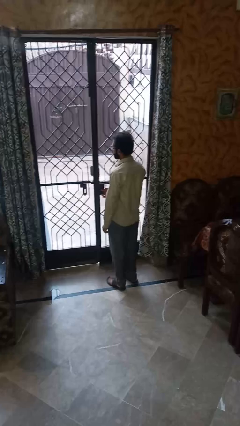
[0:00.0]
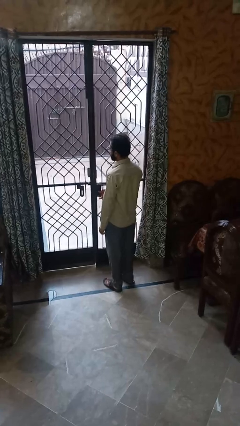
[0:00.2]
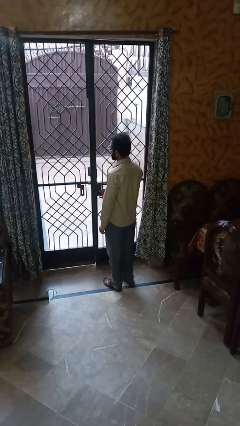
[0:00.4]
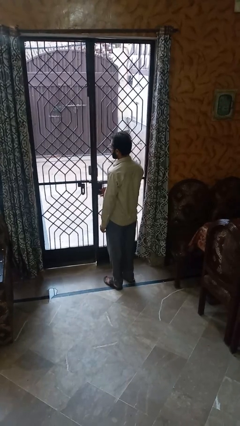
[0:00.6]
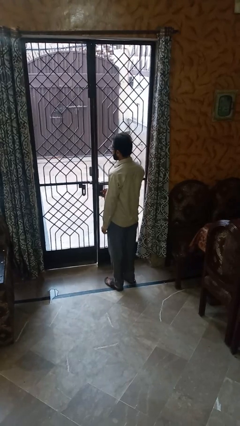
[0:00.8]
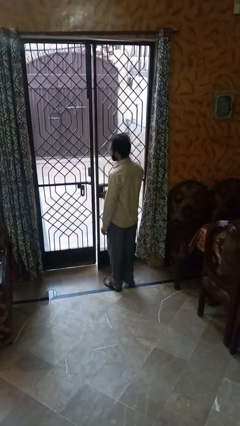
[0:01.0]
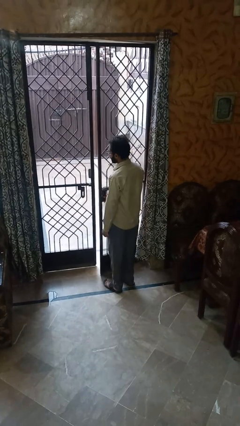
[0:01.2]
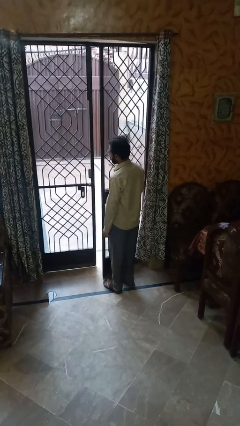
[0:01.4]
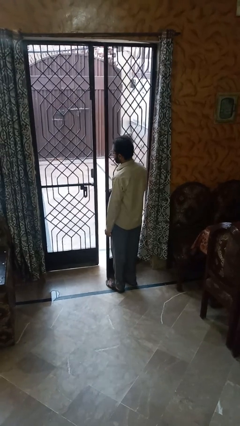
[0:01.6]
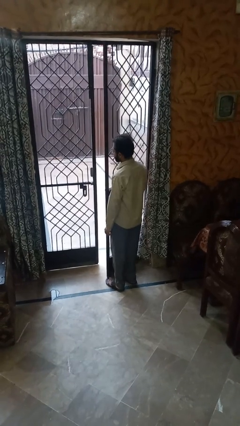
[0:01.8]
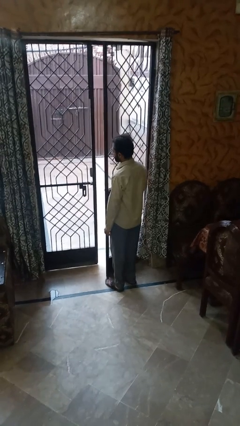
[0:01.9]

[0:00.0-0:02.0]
person opens home window

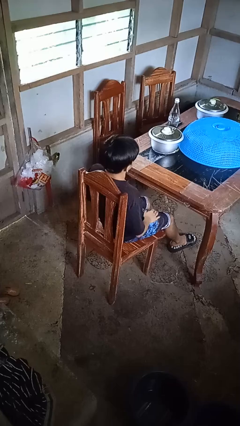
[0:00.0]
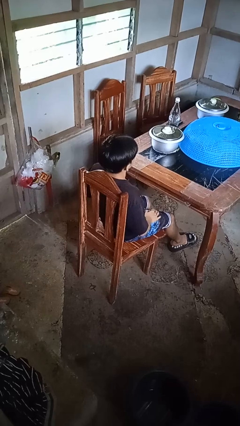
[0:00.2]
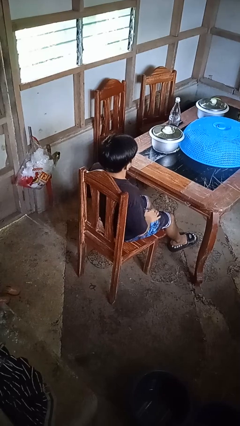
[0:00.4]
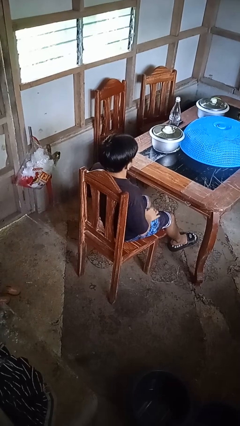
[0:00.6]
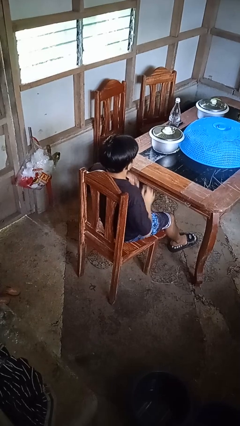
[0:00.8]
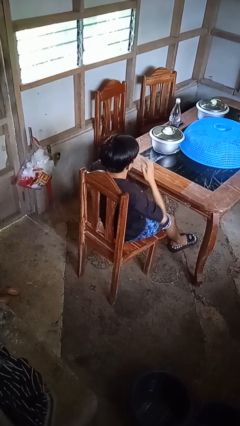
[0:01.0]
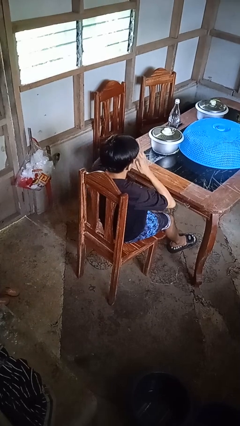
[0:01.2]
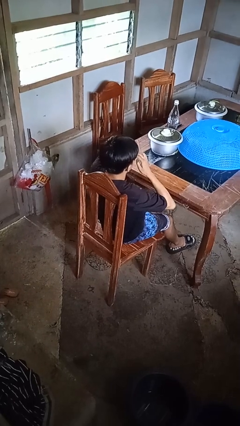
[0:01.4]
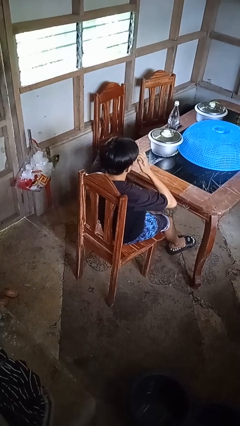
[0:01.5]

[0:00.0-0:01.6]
person rubs eyes

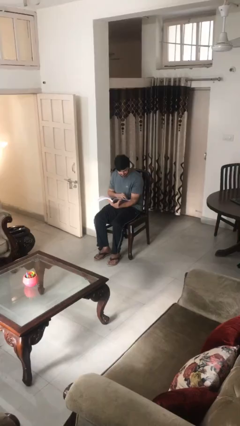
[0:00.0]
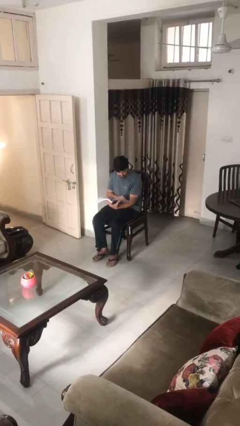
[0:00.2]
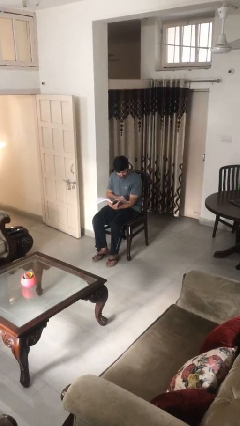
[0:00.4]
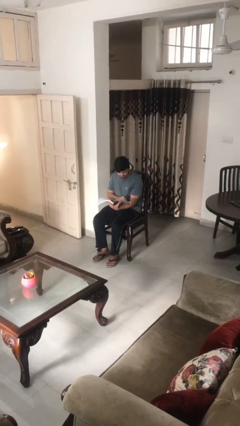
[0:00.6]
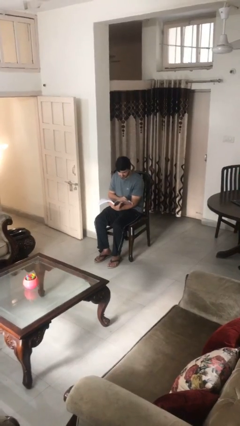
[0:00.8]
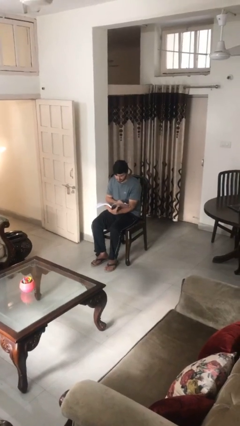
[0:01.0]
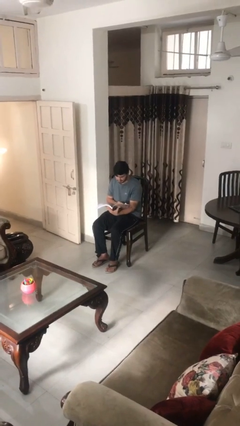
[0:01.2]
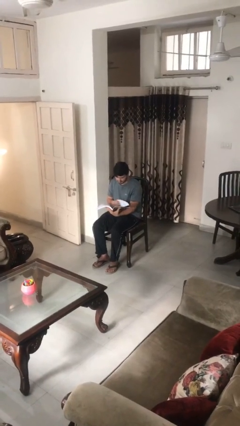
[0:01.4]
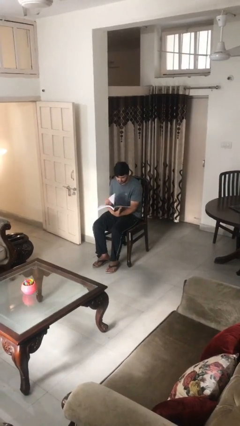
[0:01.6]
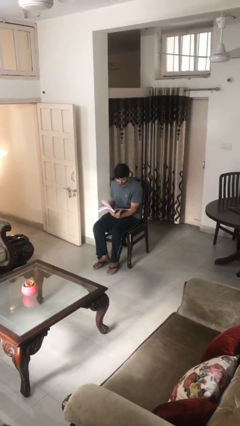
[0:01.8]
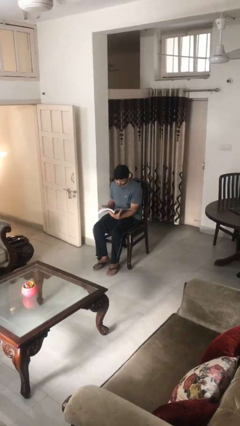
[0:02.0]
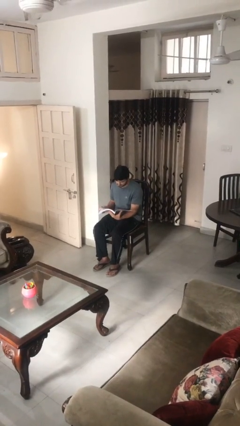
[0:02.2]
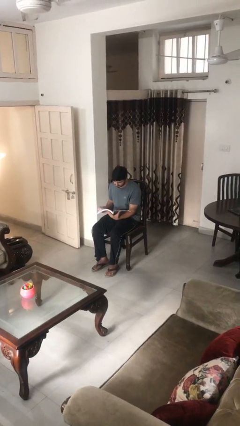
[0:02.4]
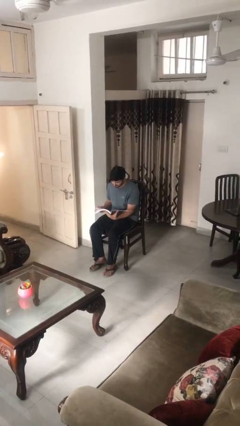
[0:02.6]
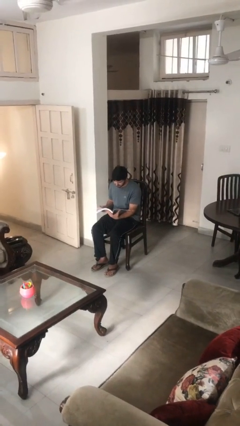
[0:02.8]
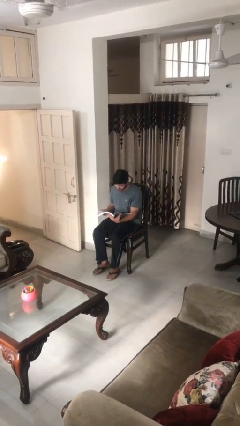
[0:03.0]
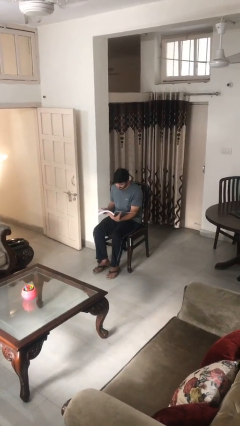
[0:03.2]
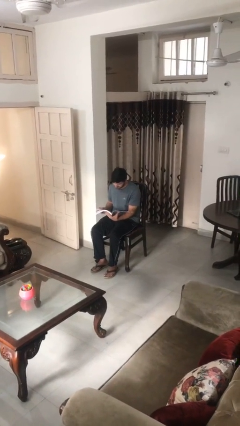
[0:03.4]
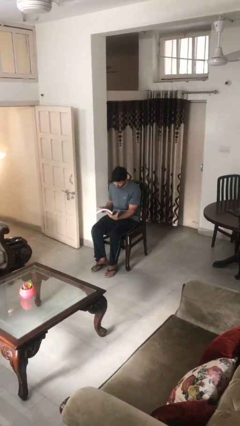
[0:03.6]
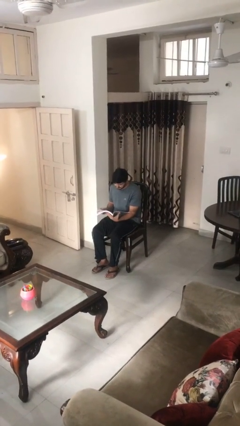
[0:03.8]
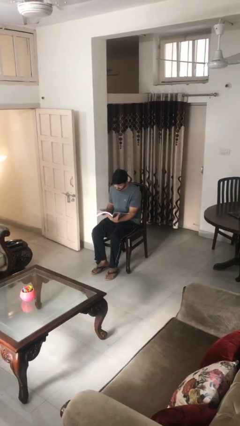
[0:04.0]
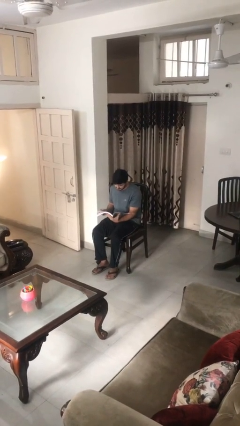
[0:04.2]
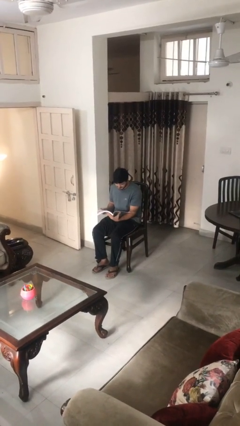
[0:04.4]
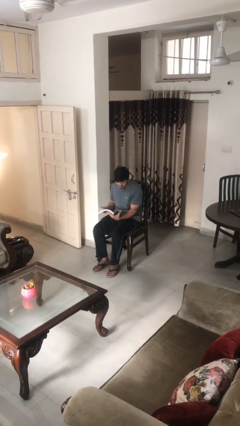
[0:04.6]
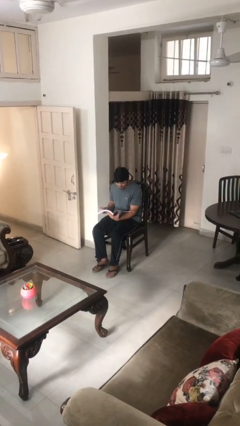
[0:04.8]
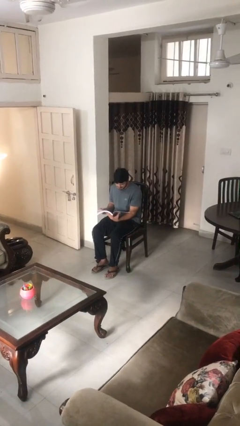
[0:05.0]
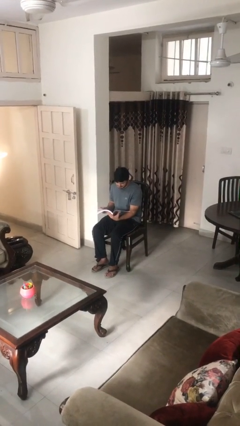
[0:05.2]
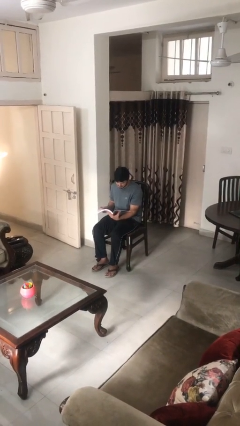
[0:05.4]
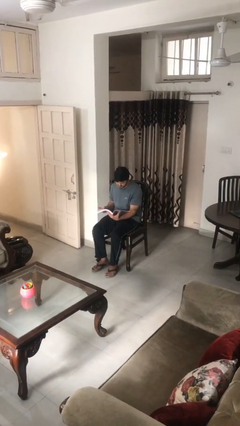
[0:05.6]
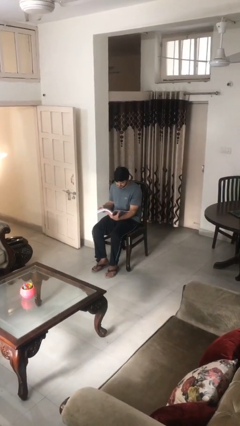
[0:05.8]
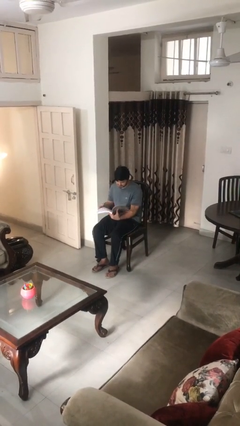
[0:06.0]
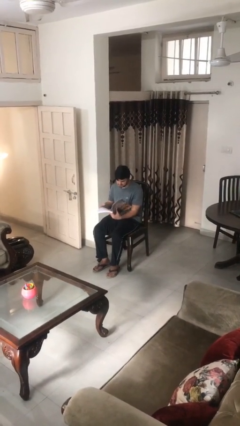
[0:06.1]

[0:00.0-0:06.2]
person reads document

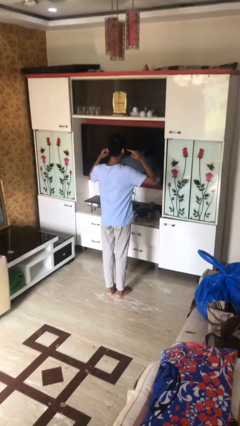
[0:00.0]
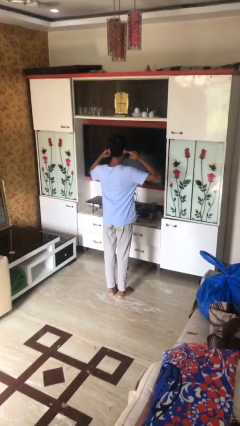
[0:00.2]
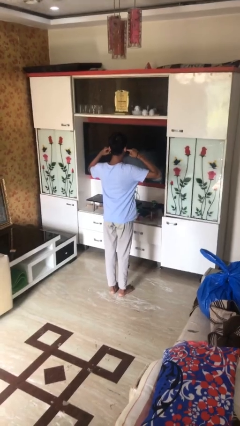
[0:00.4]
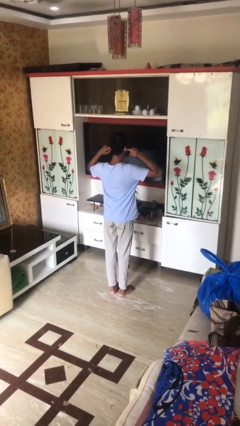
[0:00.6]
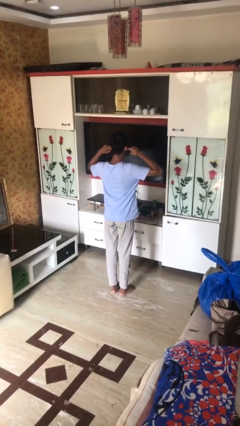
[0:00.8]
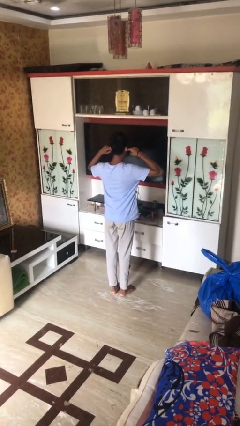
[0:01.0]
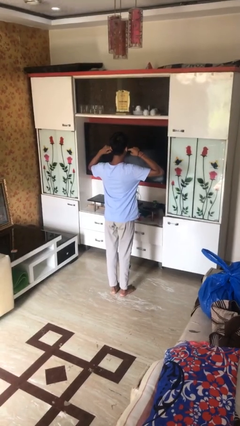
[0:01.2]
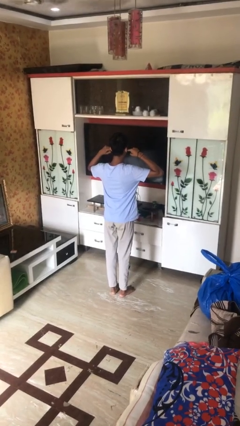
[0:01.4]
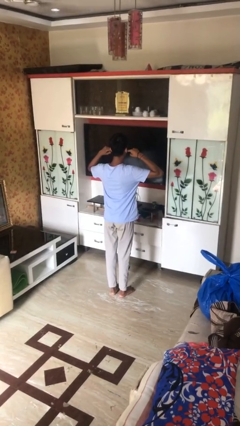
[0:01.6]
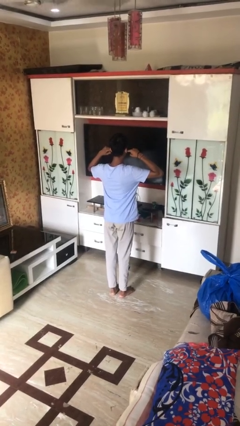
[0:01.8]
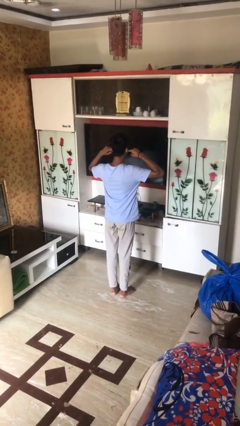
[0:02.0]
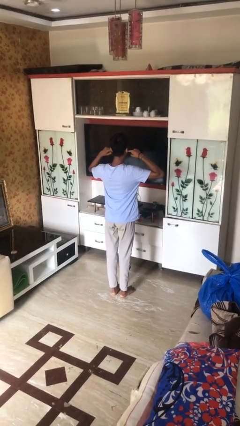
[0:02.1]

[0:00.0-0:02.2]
person puts fingers in ear

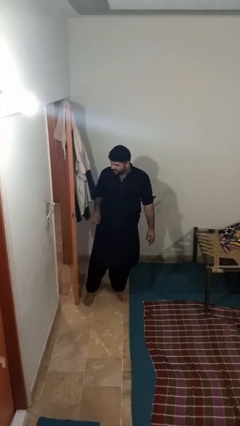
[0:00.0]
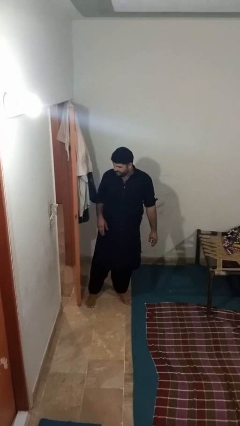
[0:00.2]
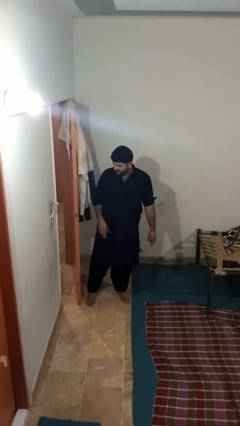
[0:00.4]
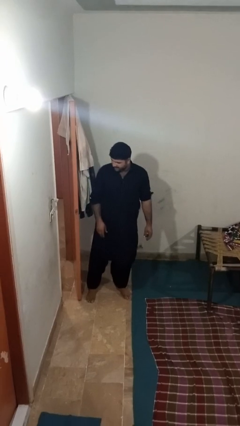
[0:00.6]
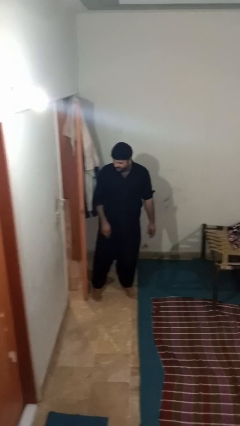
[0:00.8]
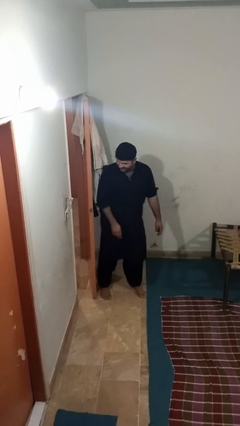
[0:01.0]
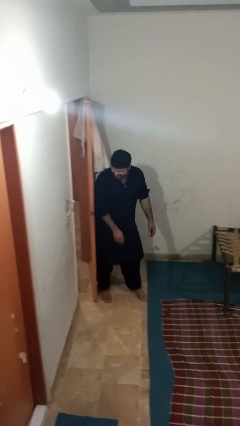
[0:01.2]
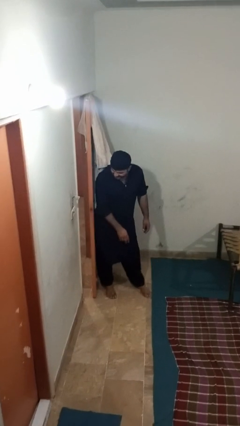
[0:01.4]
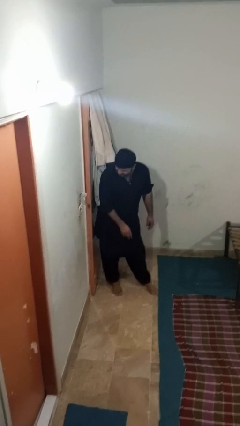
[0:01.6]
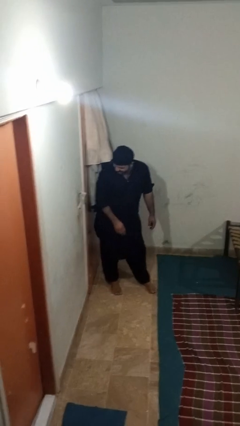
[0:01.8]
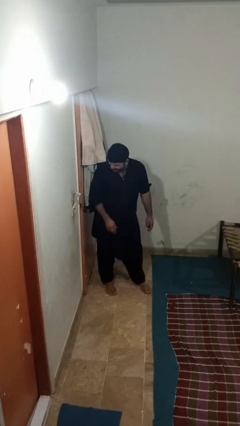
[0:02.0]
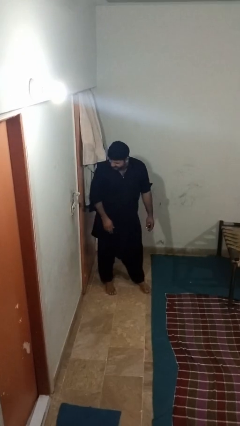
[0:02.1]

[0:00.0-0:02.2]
person closes door with hip

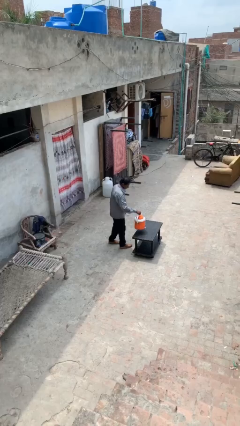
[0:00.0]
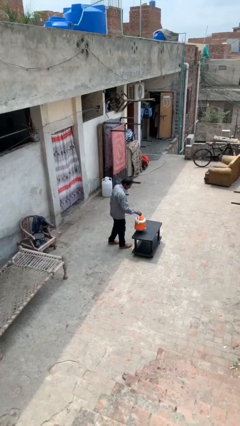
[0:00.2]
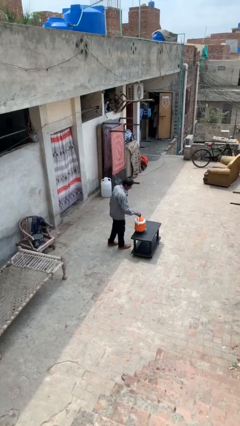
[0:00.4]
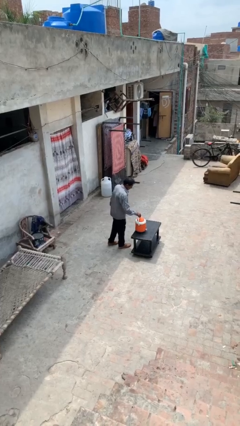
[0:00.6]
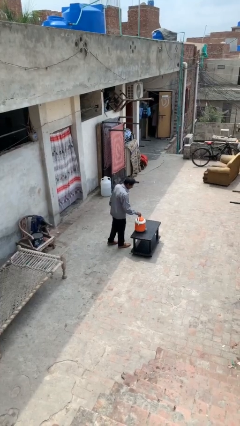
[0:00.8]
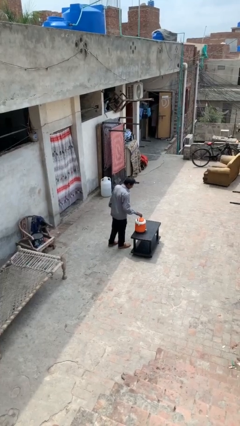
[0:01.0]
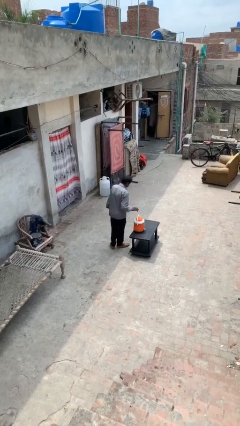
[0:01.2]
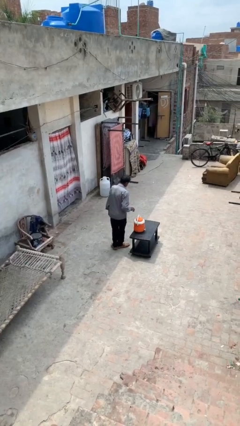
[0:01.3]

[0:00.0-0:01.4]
person puts down object on table

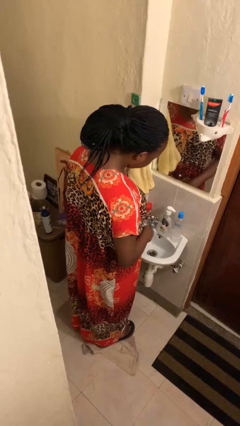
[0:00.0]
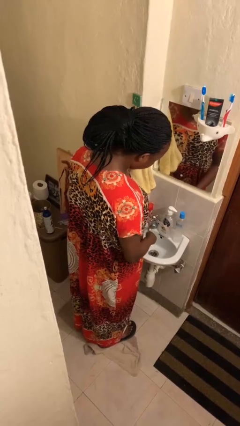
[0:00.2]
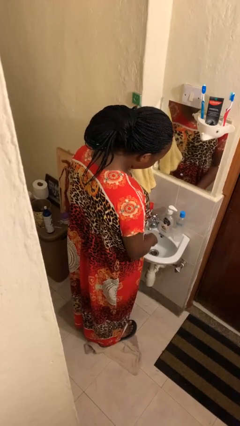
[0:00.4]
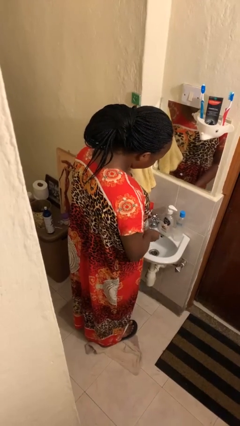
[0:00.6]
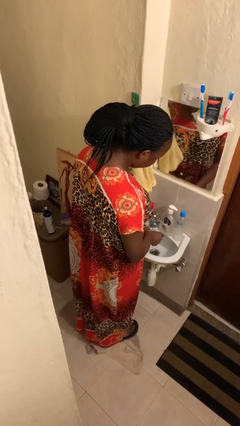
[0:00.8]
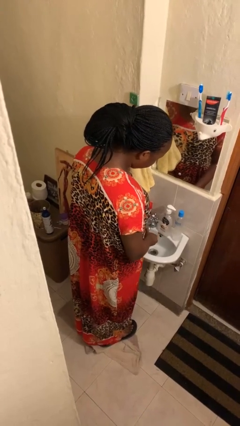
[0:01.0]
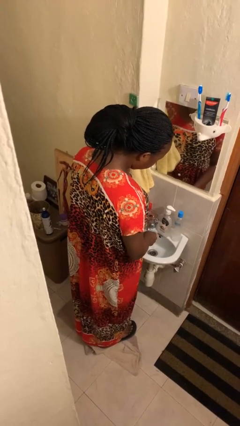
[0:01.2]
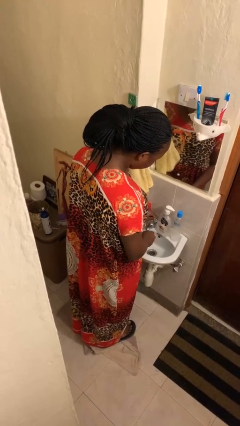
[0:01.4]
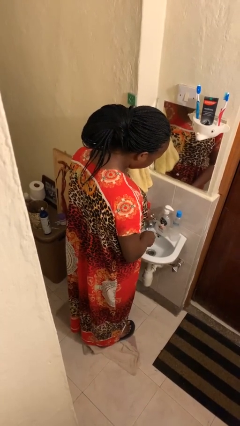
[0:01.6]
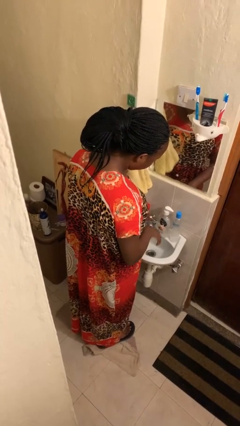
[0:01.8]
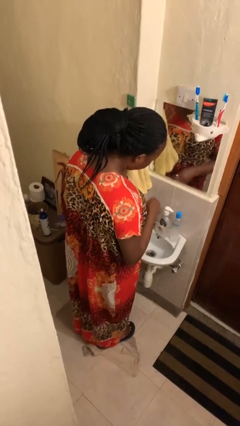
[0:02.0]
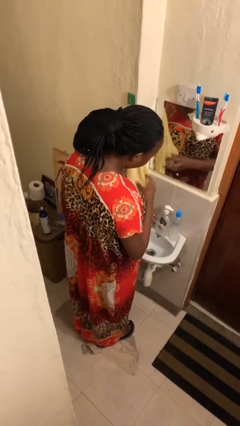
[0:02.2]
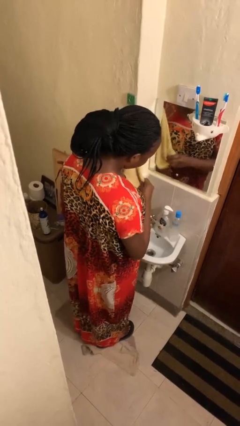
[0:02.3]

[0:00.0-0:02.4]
person washes hands
